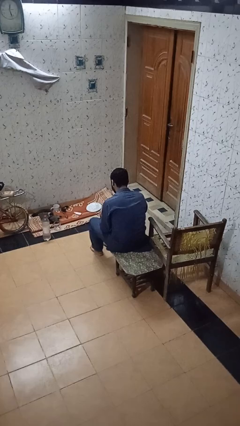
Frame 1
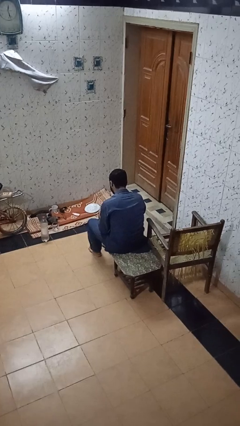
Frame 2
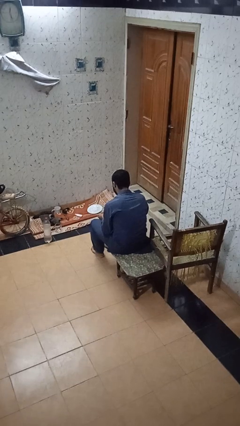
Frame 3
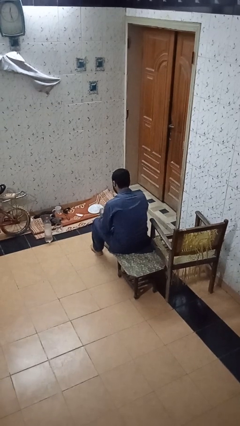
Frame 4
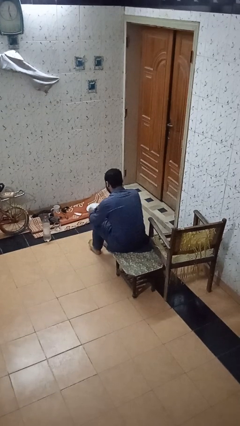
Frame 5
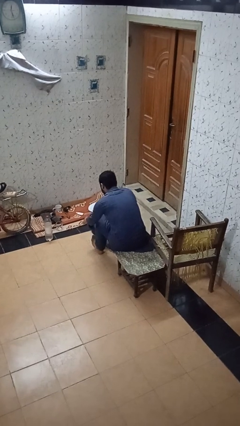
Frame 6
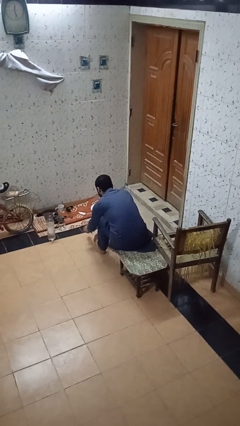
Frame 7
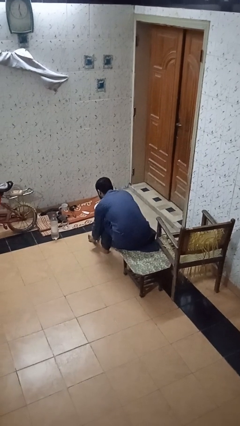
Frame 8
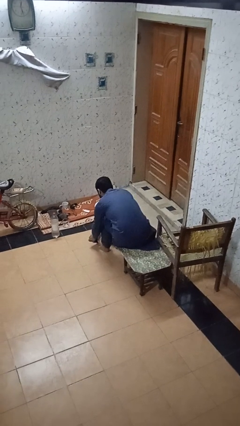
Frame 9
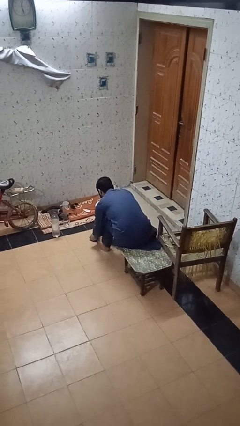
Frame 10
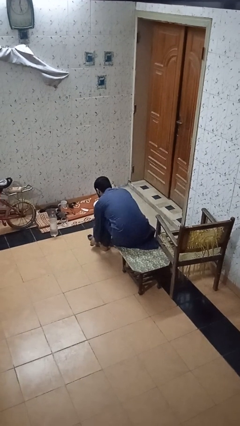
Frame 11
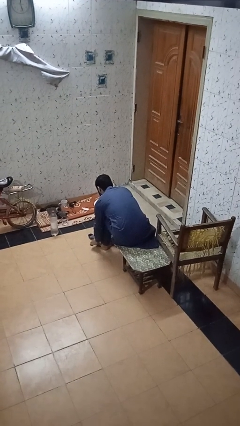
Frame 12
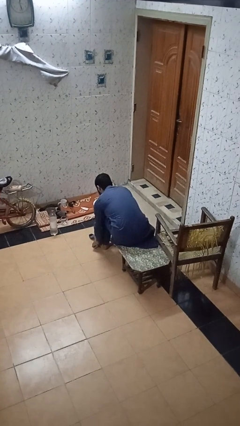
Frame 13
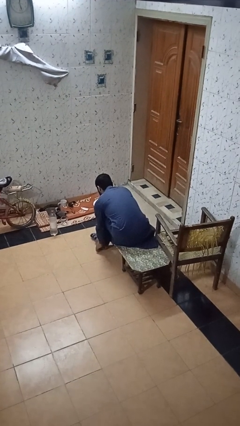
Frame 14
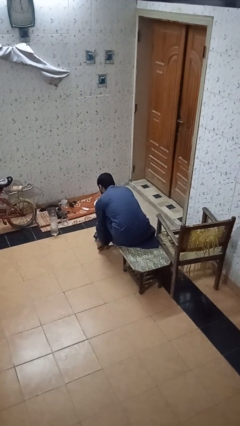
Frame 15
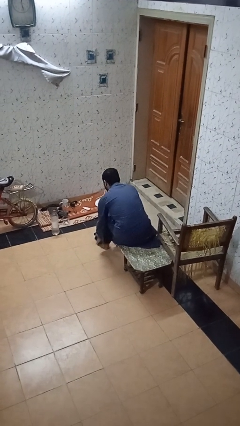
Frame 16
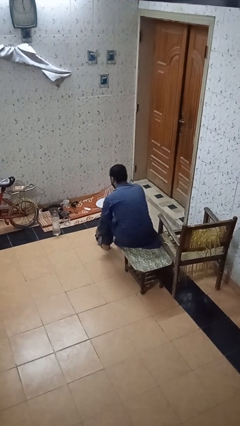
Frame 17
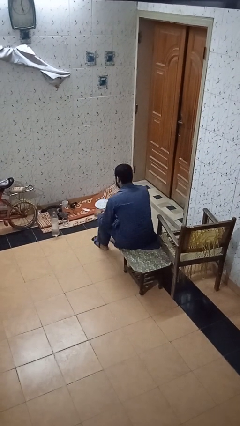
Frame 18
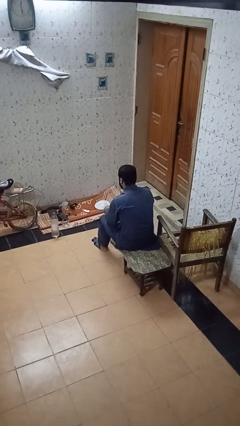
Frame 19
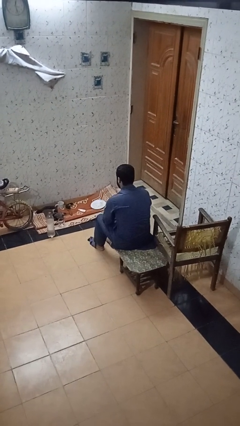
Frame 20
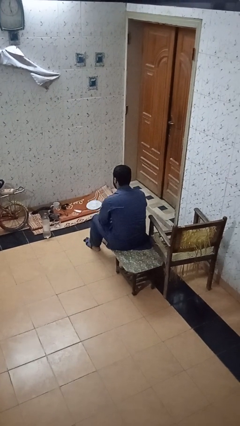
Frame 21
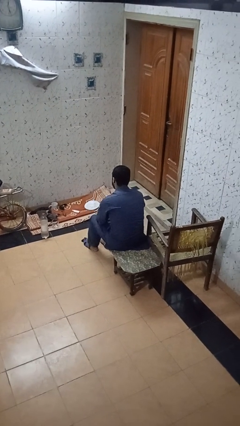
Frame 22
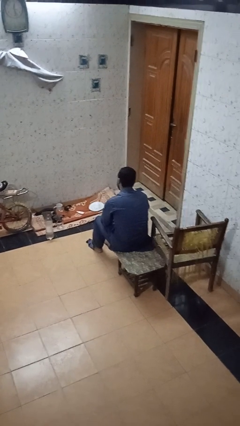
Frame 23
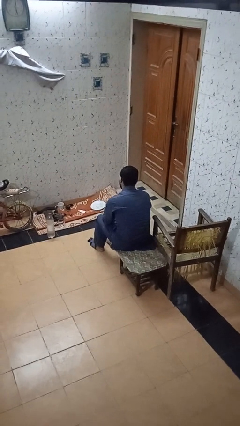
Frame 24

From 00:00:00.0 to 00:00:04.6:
person puts on socks

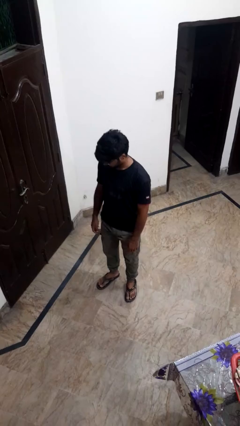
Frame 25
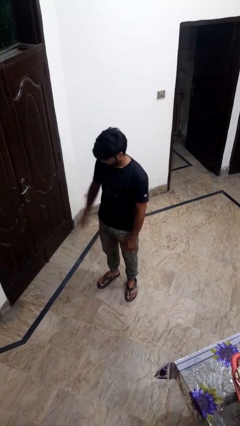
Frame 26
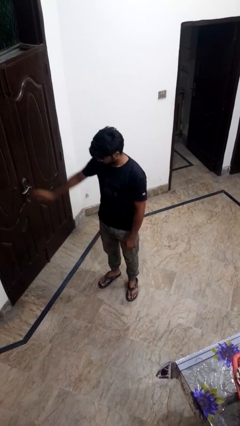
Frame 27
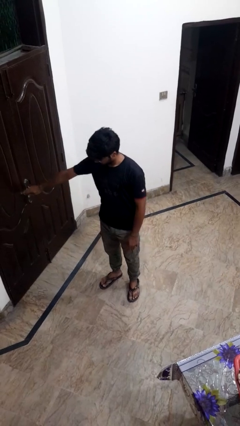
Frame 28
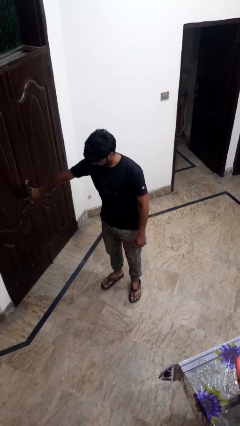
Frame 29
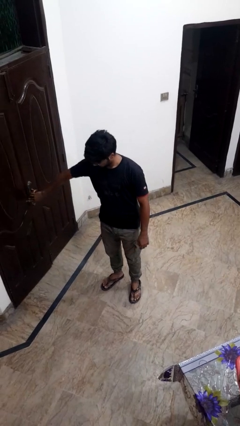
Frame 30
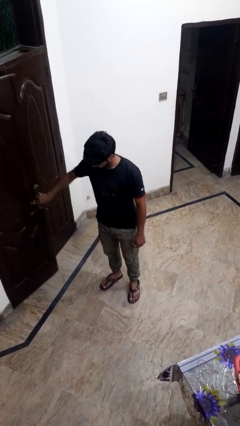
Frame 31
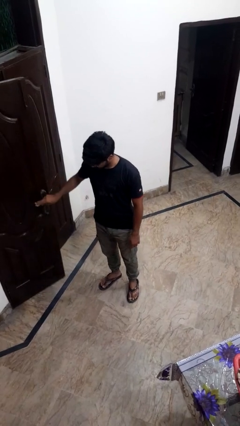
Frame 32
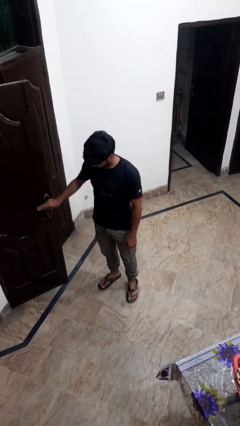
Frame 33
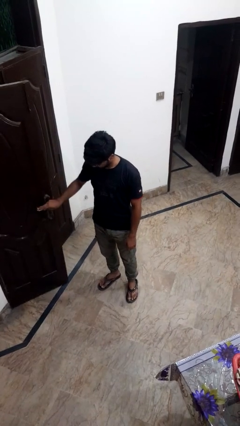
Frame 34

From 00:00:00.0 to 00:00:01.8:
person opens facility door

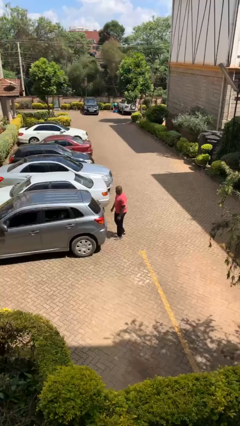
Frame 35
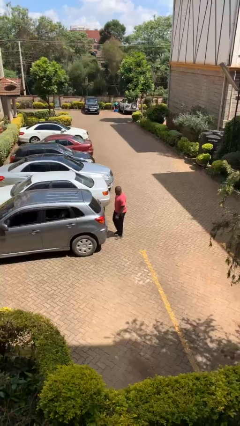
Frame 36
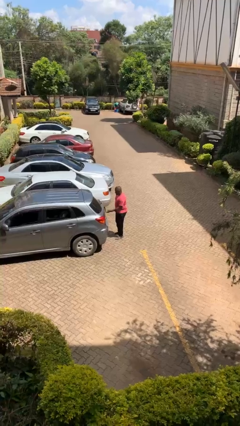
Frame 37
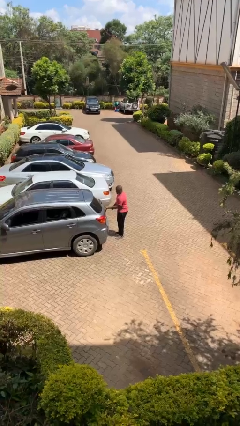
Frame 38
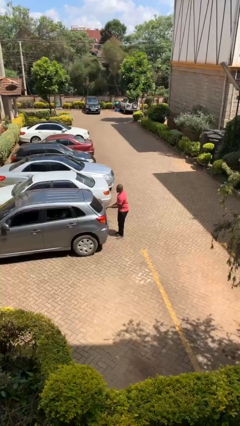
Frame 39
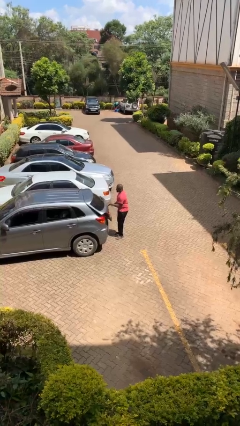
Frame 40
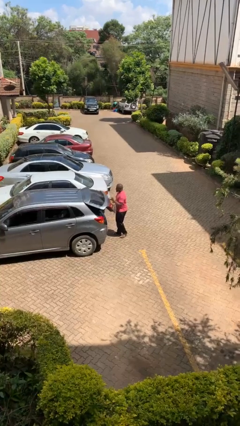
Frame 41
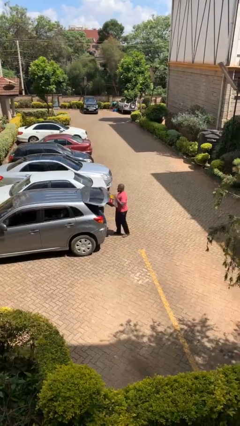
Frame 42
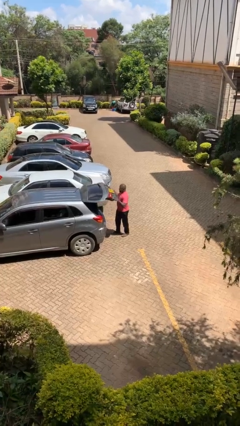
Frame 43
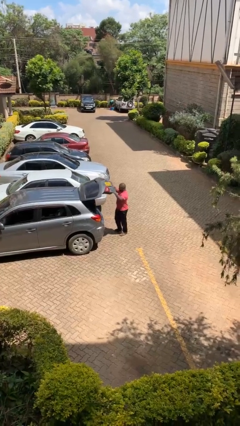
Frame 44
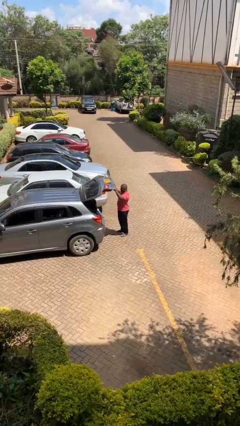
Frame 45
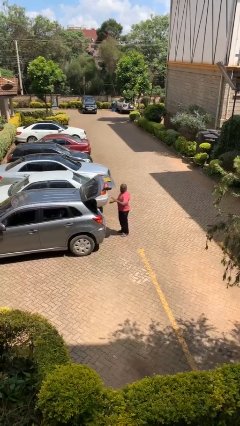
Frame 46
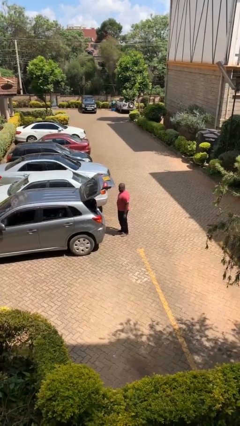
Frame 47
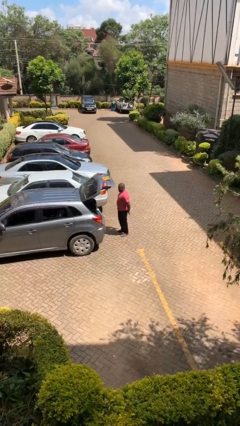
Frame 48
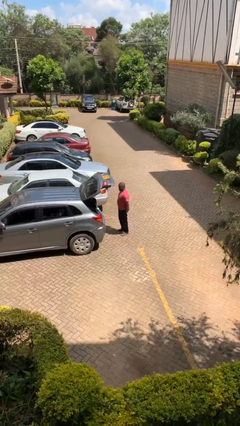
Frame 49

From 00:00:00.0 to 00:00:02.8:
person opens car trunk

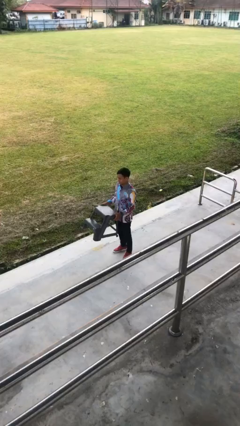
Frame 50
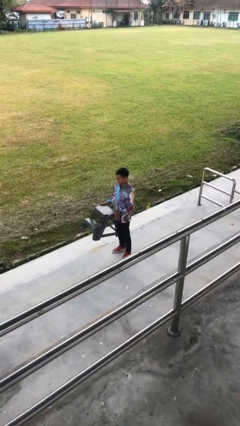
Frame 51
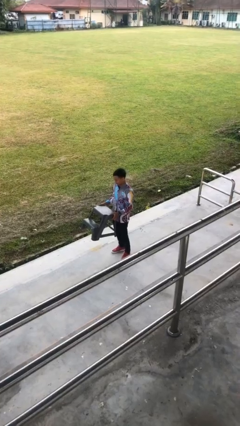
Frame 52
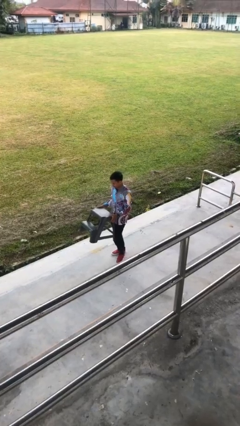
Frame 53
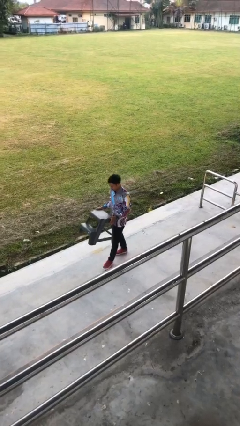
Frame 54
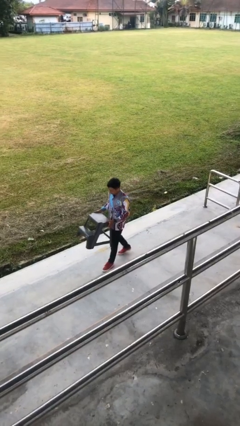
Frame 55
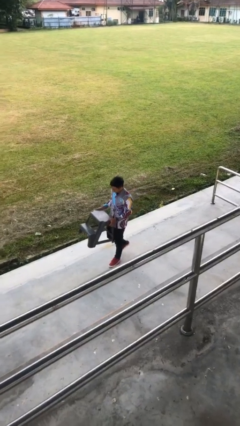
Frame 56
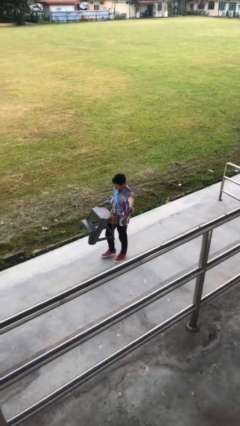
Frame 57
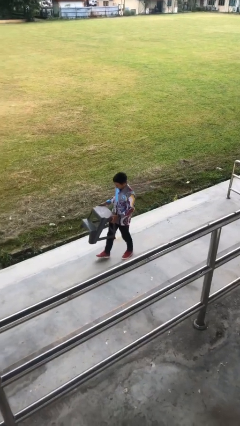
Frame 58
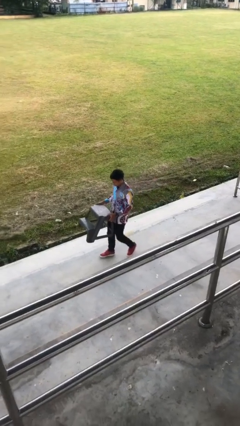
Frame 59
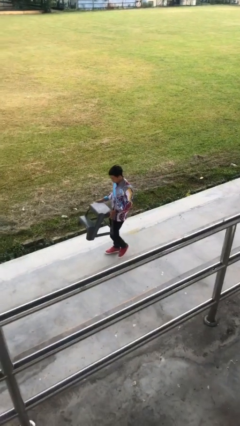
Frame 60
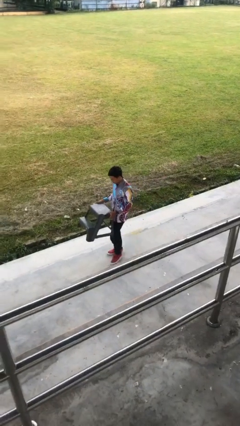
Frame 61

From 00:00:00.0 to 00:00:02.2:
person carries heavy object

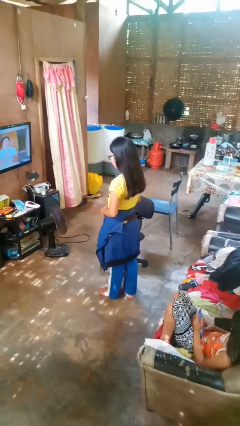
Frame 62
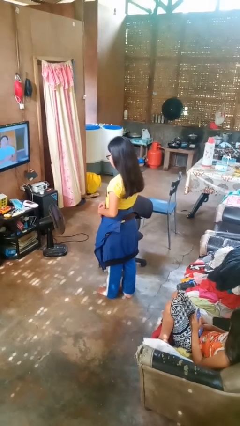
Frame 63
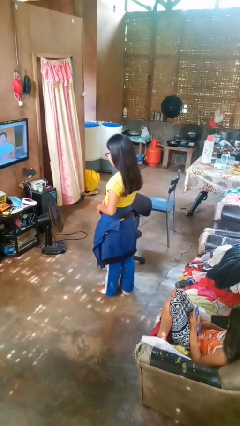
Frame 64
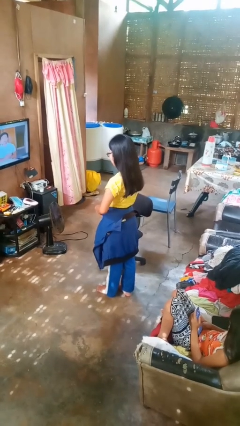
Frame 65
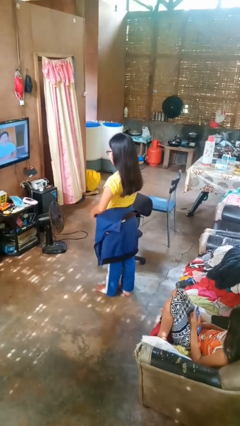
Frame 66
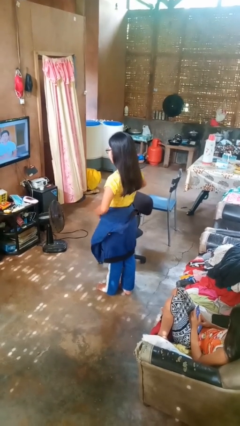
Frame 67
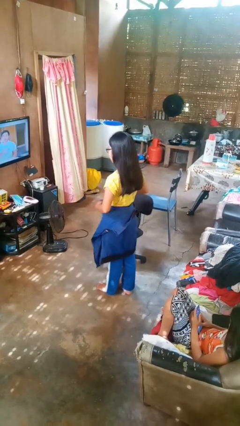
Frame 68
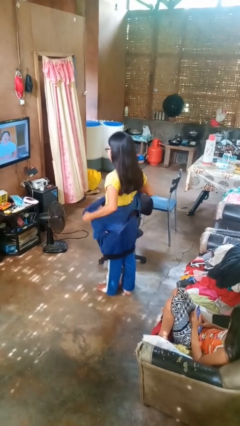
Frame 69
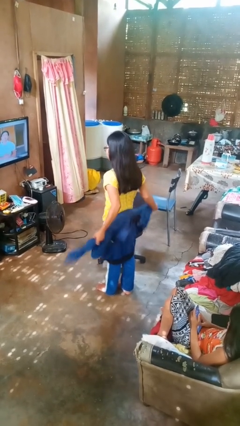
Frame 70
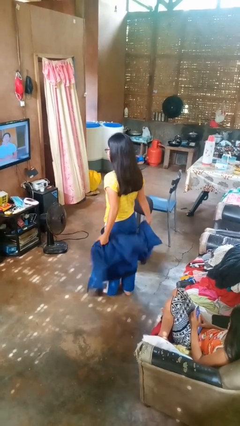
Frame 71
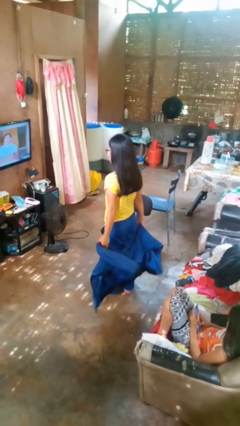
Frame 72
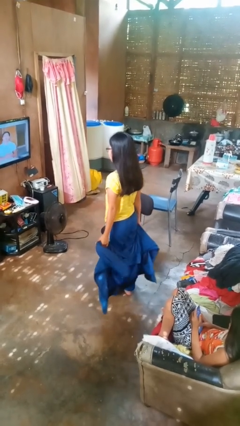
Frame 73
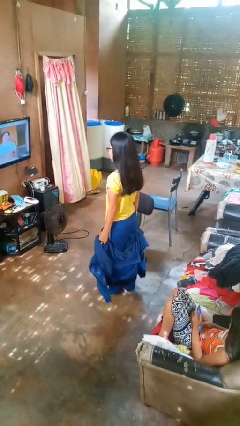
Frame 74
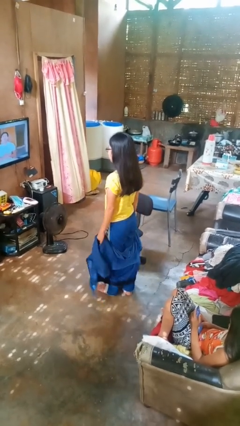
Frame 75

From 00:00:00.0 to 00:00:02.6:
person unties jacket around waist

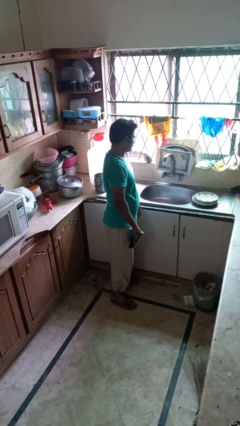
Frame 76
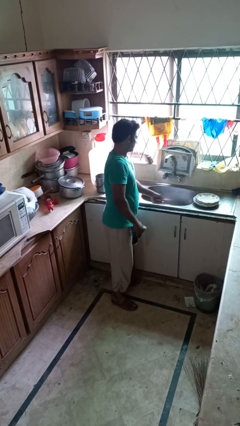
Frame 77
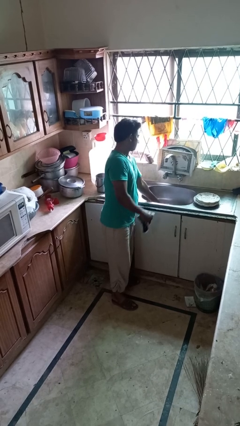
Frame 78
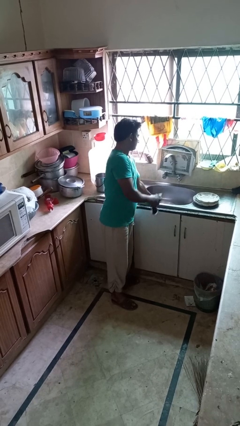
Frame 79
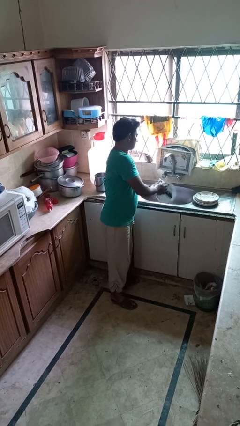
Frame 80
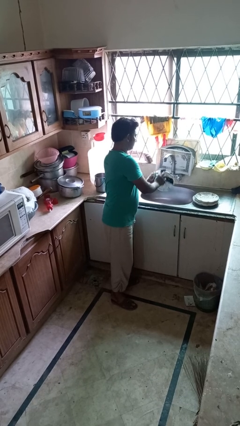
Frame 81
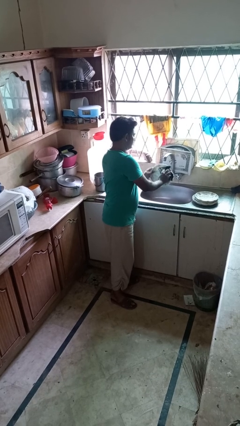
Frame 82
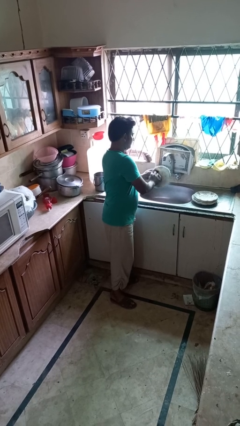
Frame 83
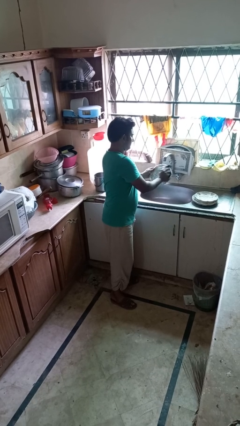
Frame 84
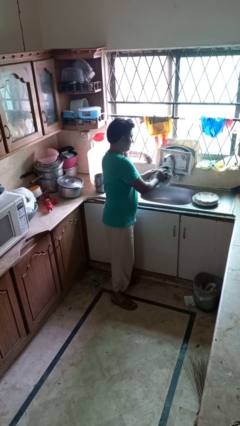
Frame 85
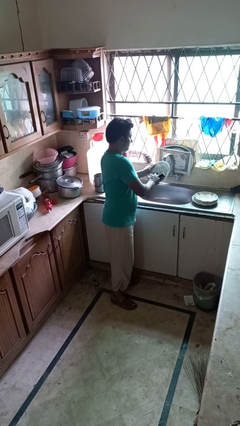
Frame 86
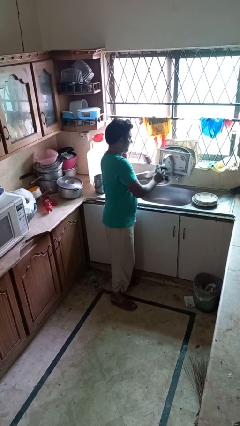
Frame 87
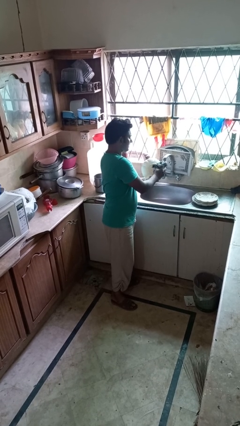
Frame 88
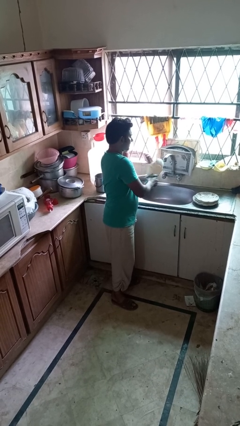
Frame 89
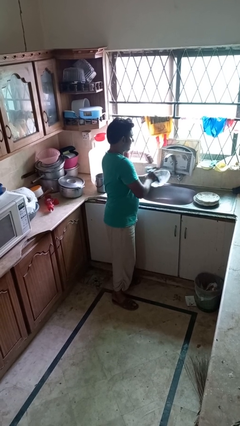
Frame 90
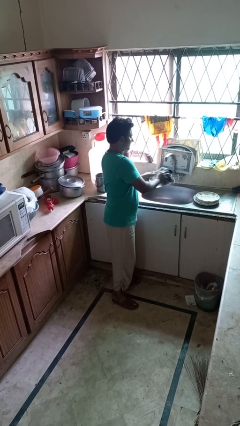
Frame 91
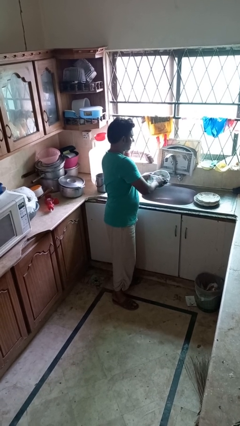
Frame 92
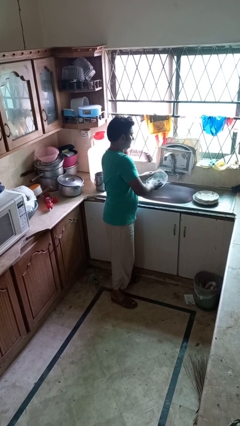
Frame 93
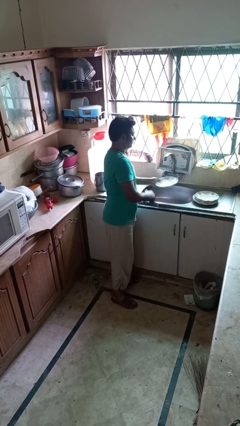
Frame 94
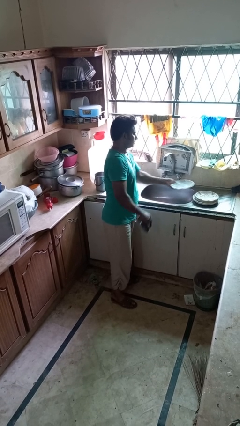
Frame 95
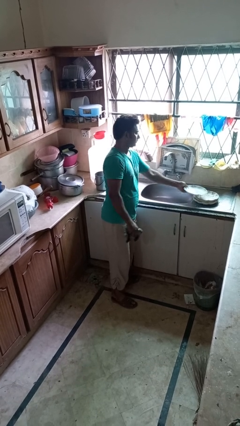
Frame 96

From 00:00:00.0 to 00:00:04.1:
person dries dish
